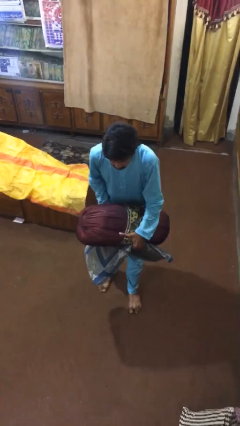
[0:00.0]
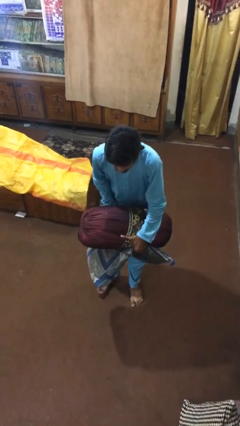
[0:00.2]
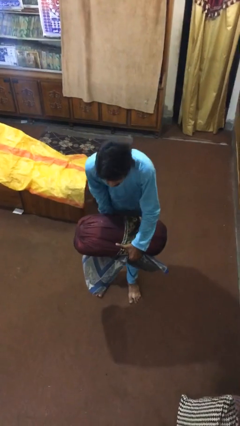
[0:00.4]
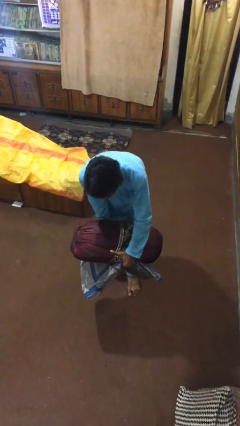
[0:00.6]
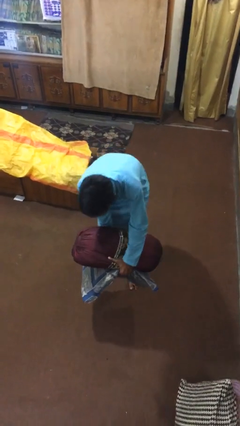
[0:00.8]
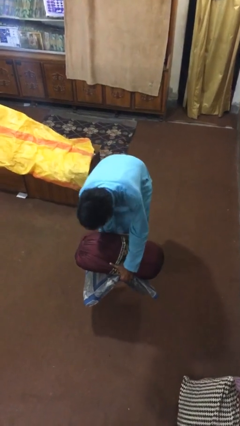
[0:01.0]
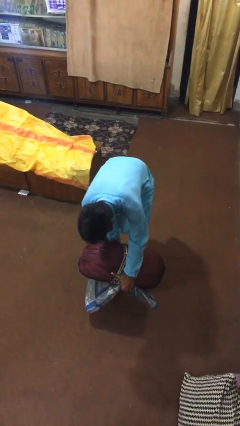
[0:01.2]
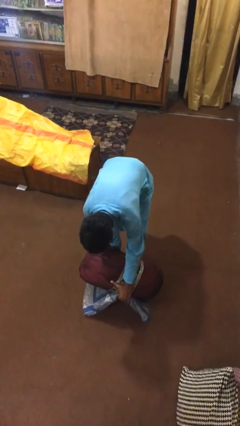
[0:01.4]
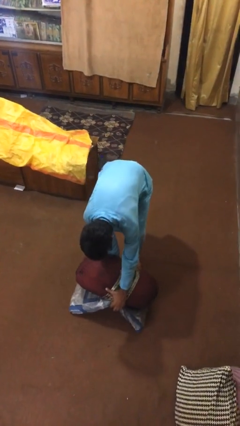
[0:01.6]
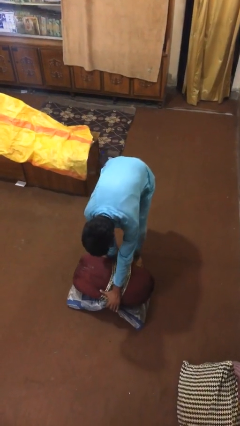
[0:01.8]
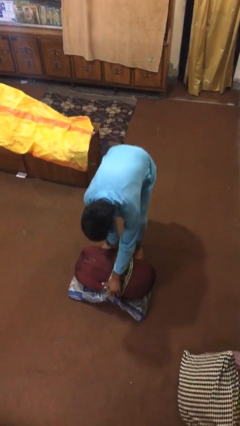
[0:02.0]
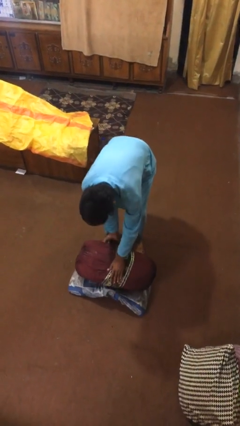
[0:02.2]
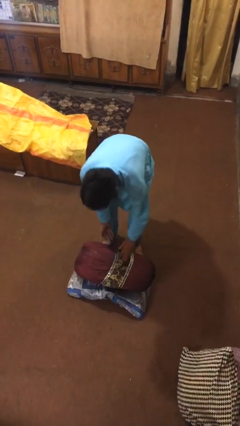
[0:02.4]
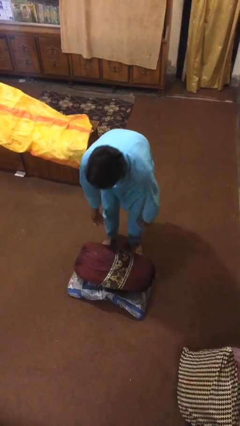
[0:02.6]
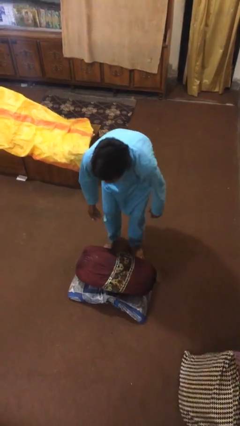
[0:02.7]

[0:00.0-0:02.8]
person puts down object on floor

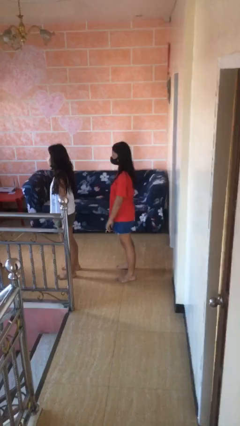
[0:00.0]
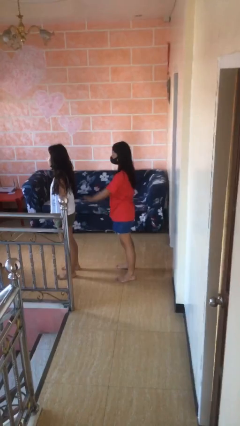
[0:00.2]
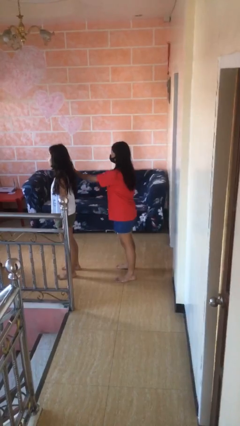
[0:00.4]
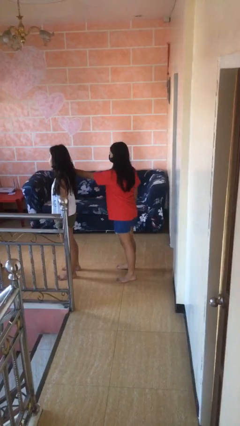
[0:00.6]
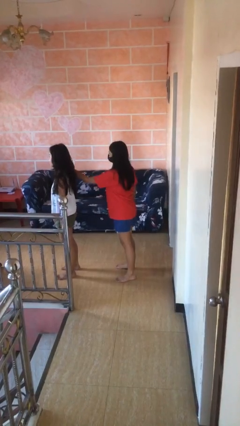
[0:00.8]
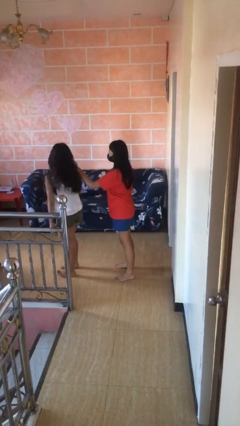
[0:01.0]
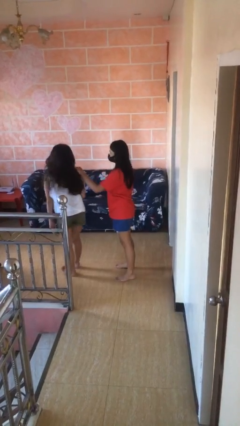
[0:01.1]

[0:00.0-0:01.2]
person grabs person by shoulder

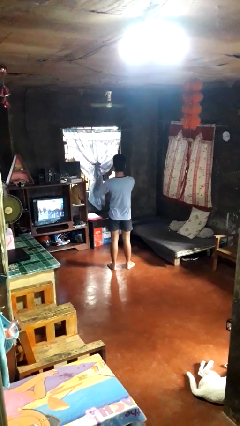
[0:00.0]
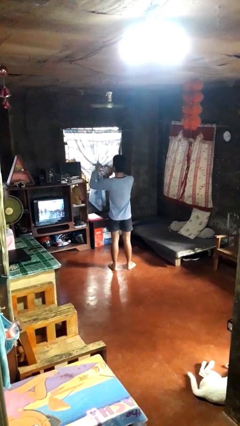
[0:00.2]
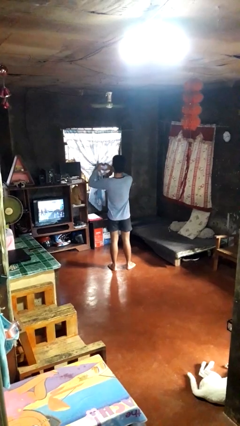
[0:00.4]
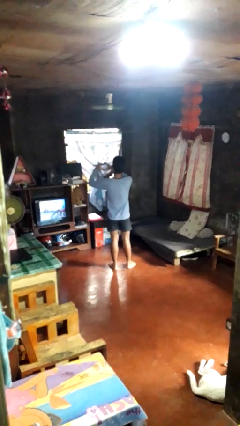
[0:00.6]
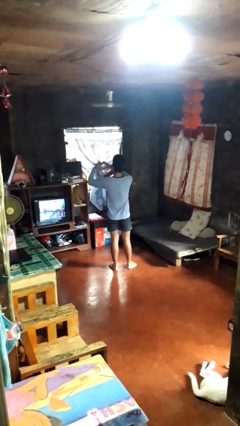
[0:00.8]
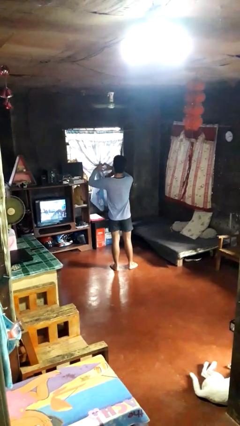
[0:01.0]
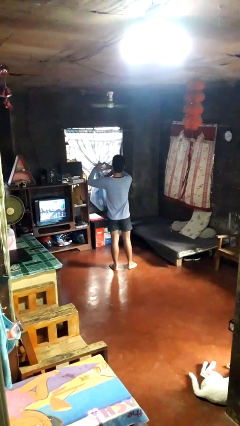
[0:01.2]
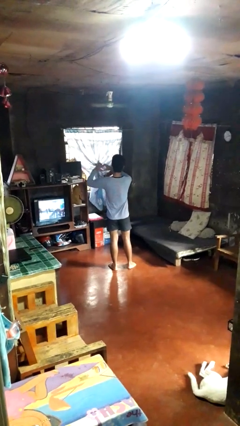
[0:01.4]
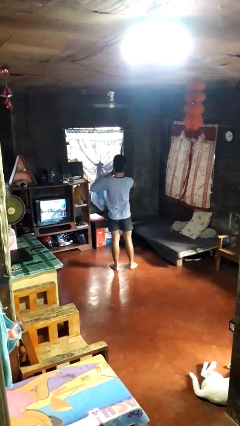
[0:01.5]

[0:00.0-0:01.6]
person gestures heart

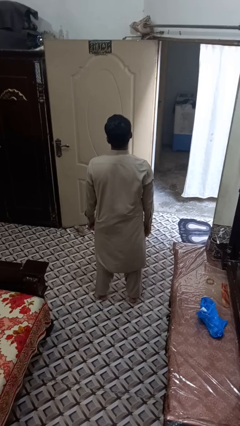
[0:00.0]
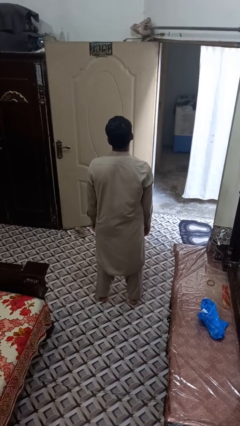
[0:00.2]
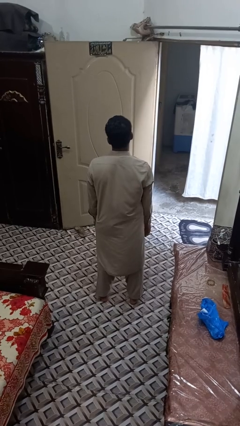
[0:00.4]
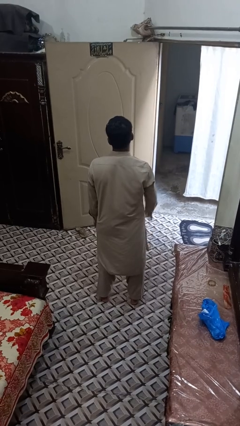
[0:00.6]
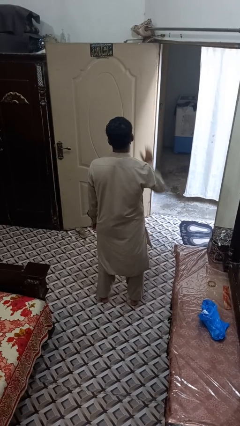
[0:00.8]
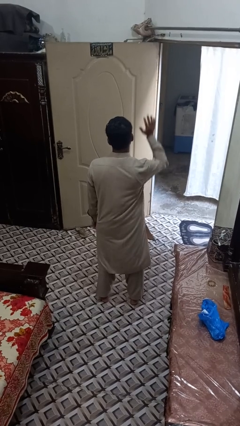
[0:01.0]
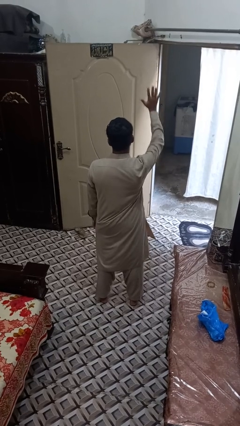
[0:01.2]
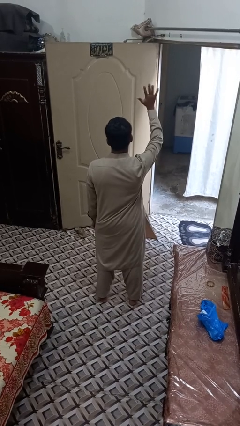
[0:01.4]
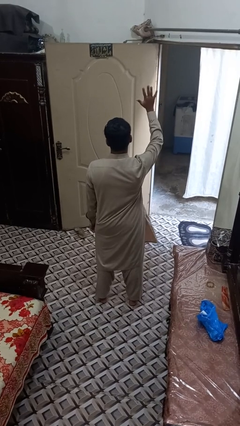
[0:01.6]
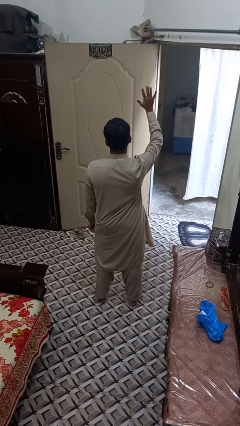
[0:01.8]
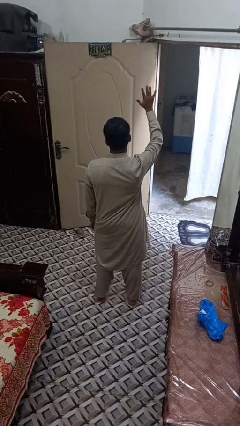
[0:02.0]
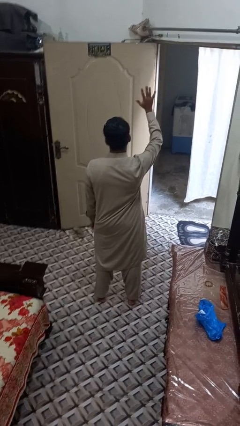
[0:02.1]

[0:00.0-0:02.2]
person gestures number five

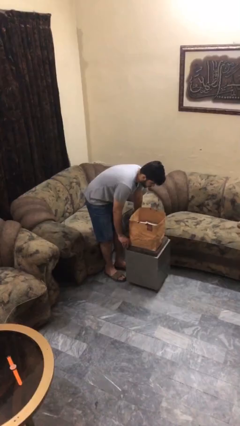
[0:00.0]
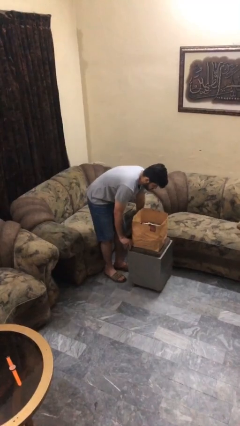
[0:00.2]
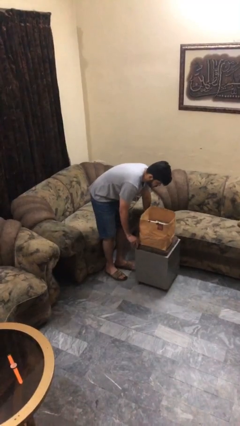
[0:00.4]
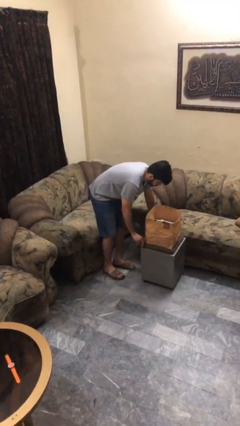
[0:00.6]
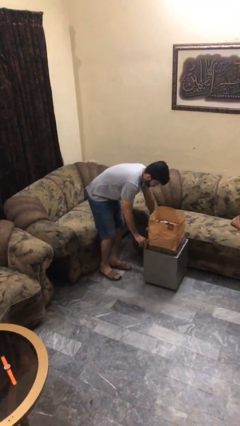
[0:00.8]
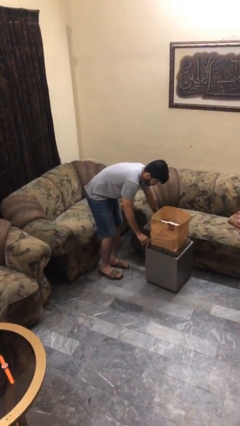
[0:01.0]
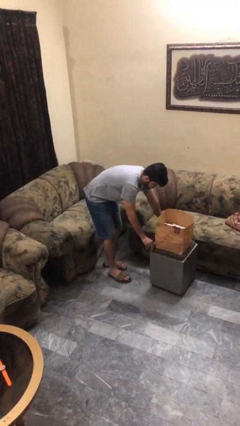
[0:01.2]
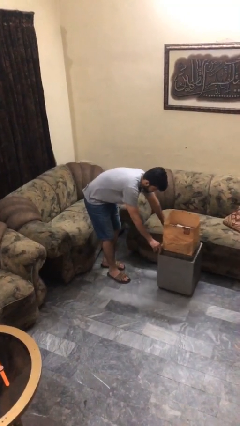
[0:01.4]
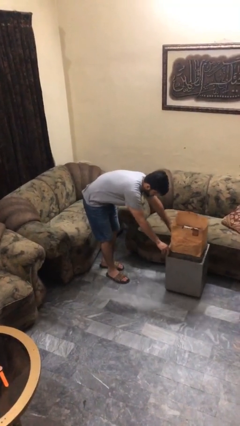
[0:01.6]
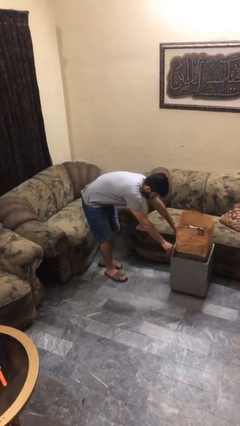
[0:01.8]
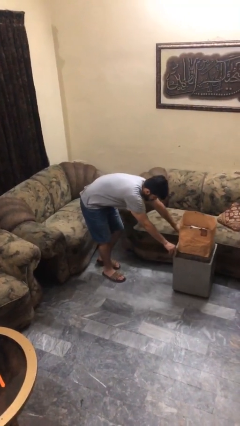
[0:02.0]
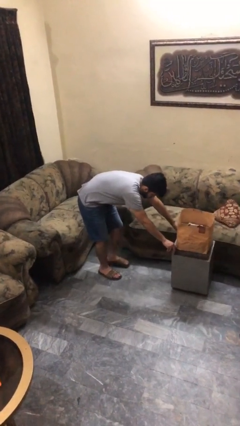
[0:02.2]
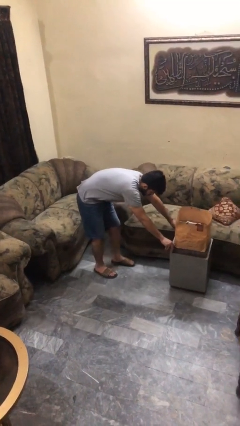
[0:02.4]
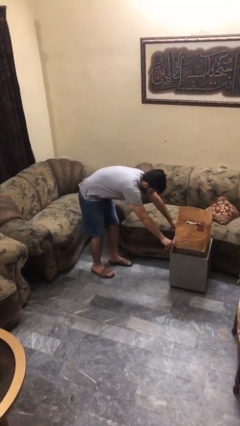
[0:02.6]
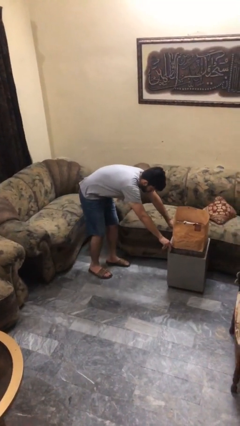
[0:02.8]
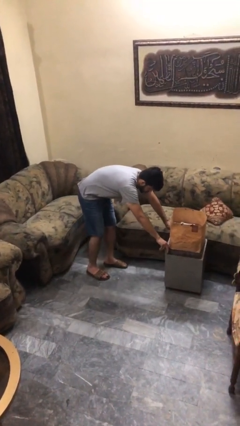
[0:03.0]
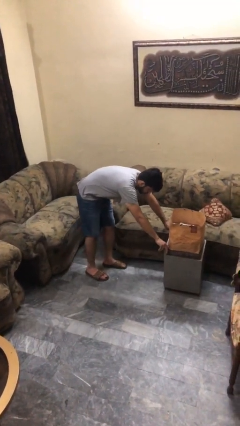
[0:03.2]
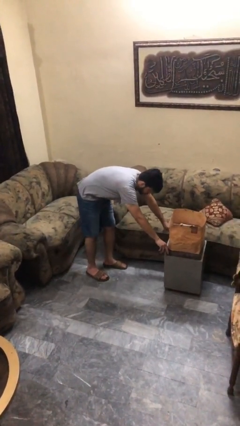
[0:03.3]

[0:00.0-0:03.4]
person pushes wheeled cart

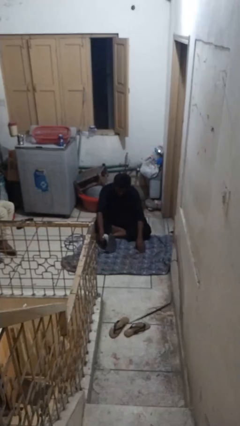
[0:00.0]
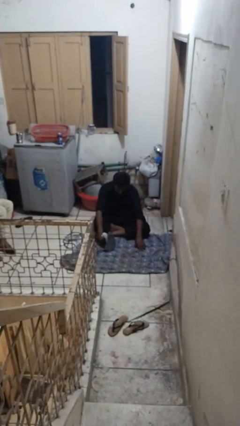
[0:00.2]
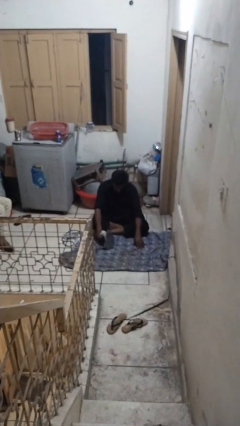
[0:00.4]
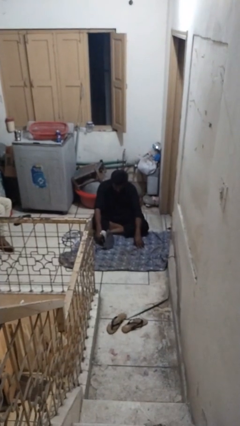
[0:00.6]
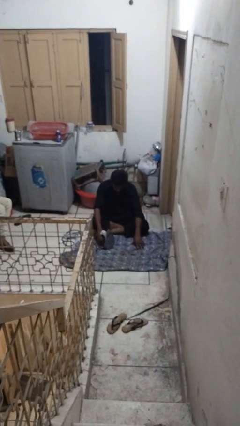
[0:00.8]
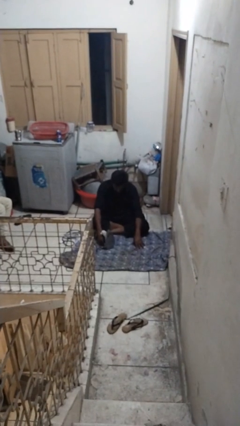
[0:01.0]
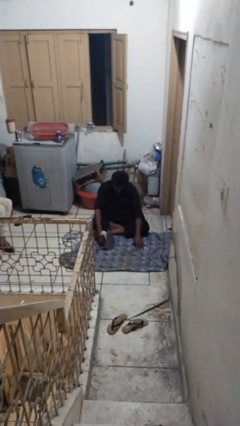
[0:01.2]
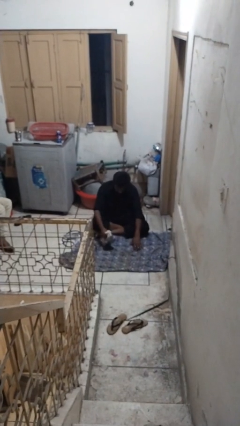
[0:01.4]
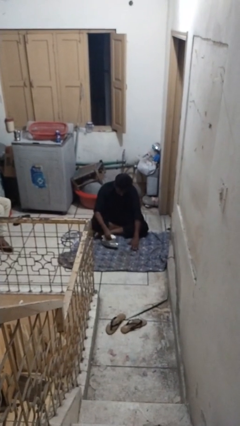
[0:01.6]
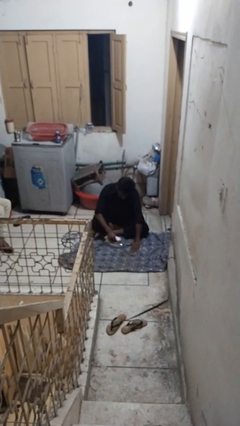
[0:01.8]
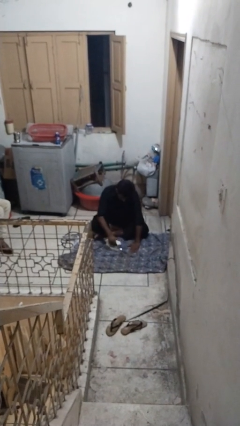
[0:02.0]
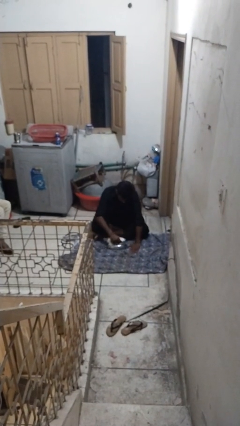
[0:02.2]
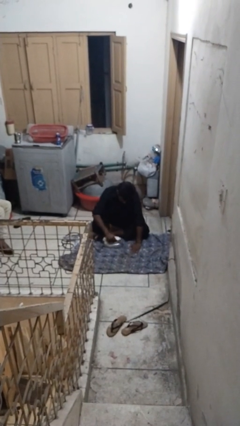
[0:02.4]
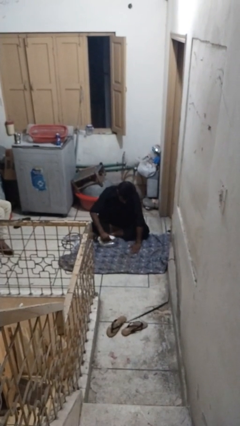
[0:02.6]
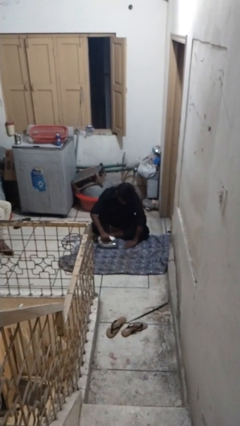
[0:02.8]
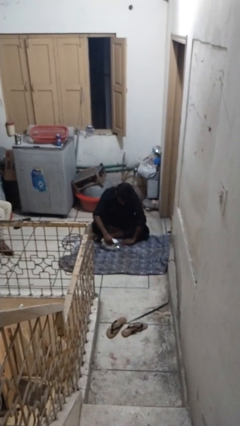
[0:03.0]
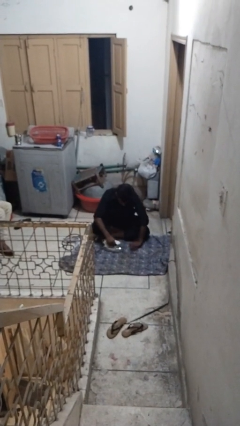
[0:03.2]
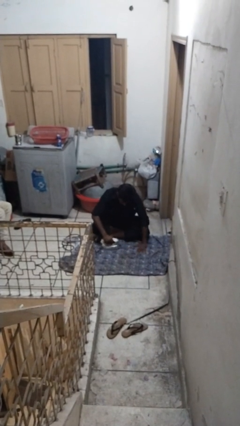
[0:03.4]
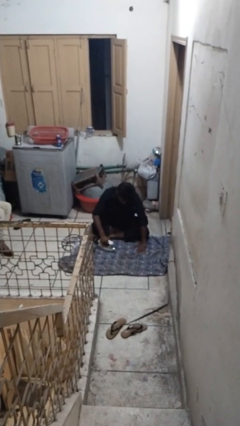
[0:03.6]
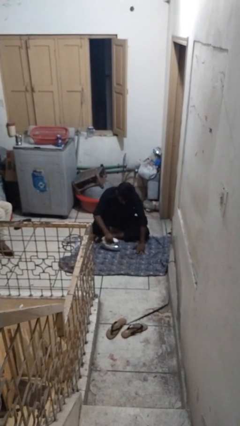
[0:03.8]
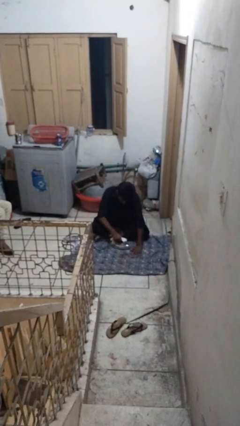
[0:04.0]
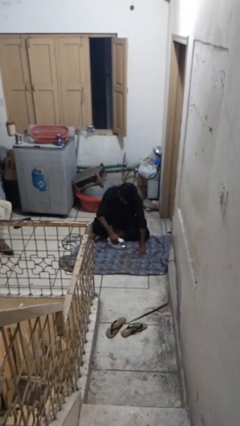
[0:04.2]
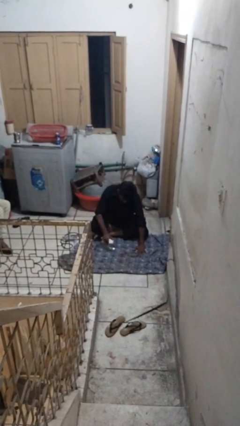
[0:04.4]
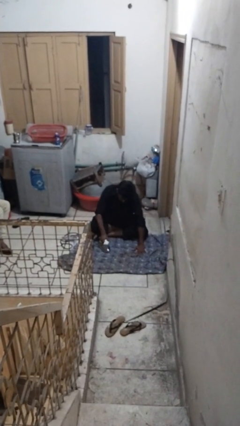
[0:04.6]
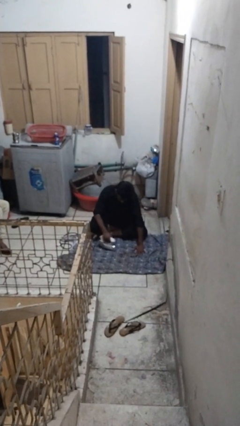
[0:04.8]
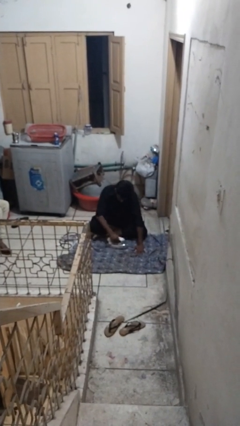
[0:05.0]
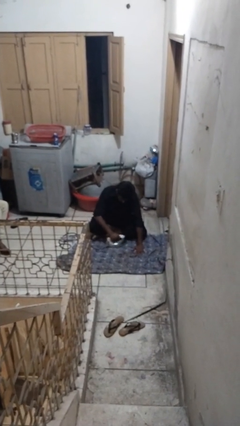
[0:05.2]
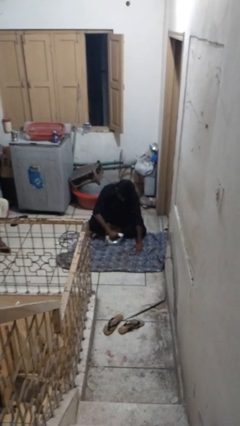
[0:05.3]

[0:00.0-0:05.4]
person irons clothes

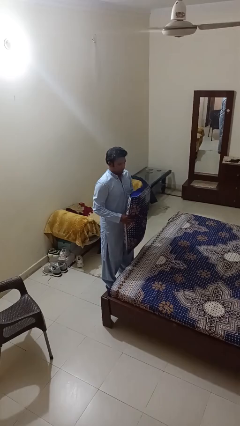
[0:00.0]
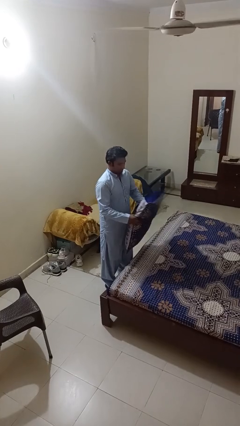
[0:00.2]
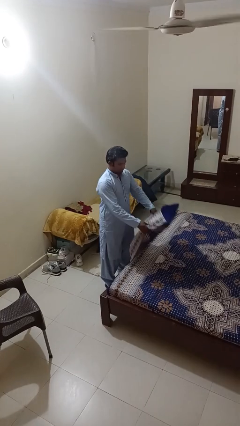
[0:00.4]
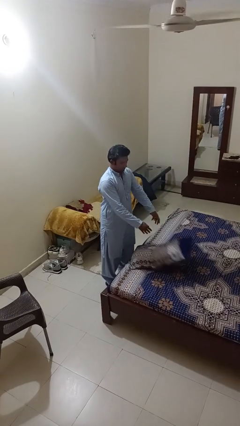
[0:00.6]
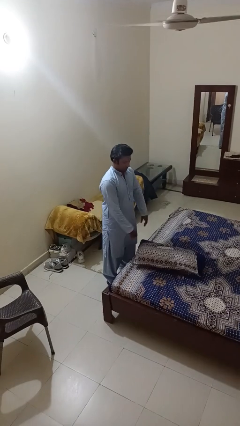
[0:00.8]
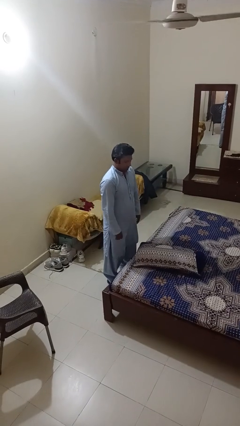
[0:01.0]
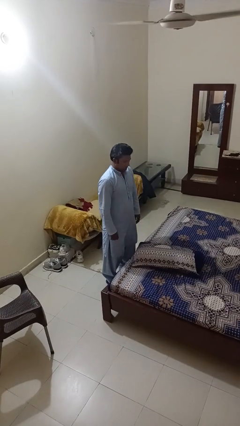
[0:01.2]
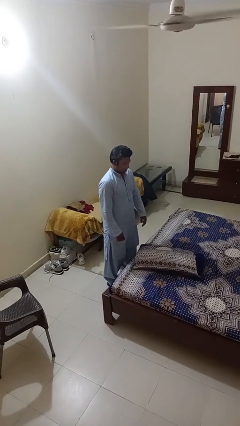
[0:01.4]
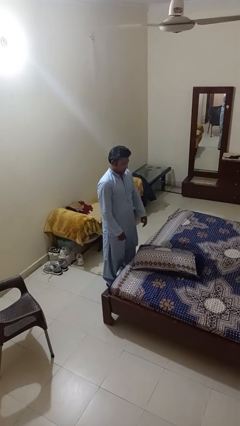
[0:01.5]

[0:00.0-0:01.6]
person puts down object on bed
